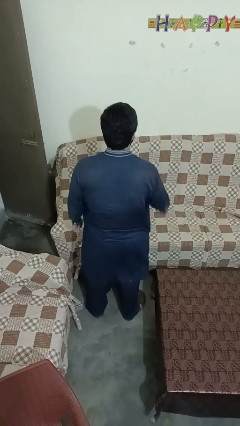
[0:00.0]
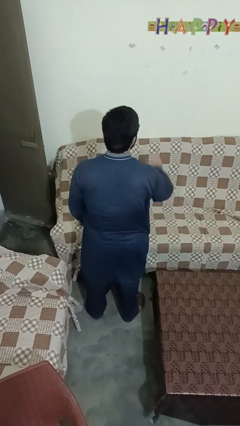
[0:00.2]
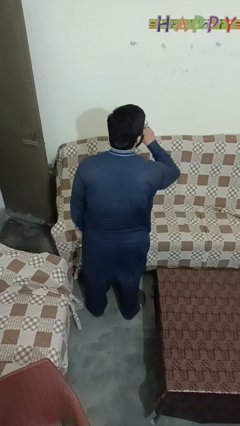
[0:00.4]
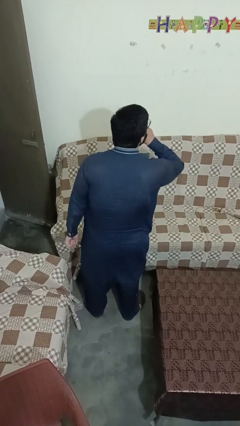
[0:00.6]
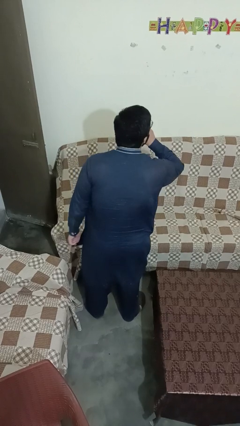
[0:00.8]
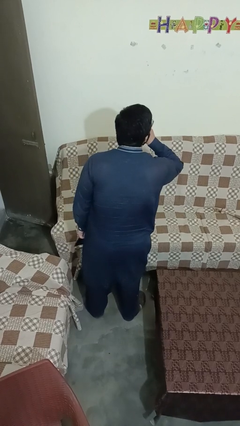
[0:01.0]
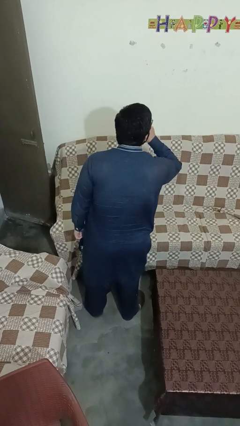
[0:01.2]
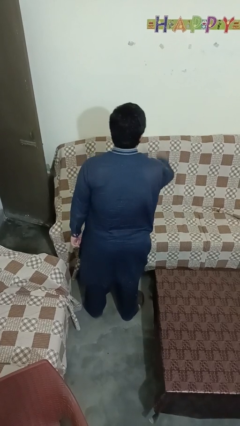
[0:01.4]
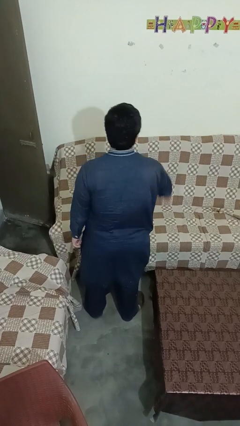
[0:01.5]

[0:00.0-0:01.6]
person gestures be quiet

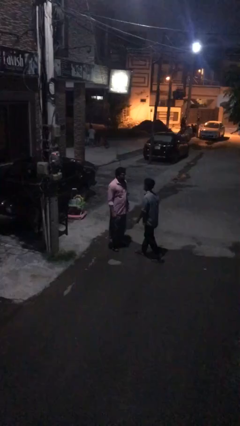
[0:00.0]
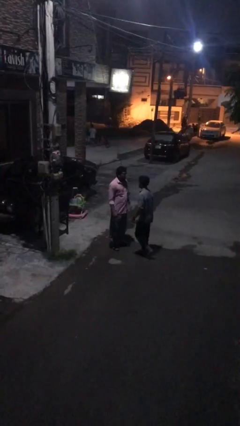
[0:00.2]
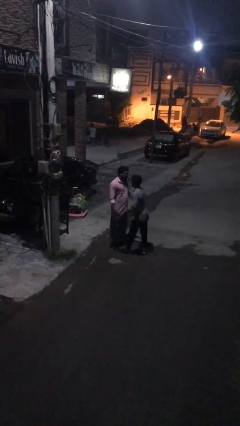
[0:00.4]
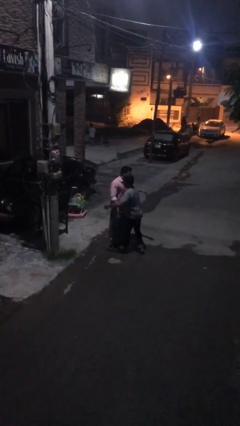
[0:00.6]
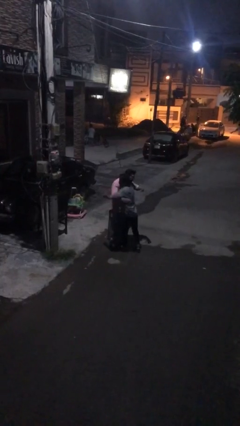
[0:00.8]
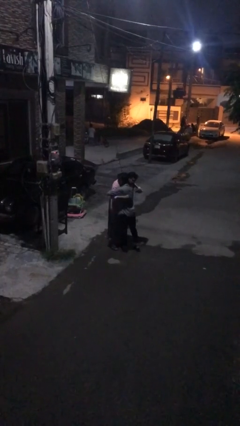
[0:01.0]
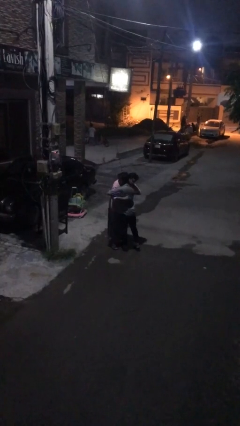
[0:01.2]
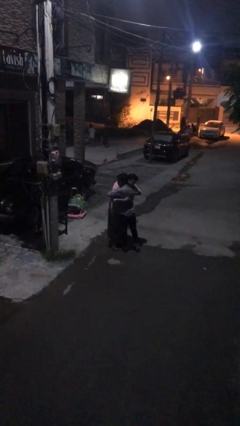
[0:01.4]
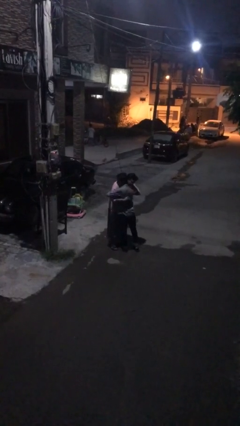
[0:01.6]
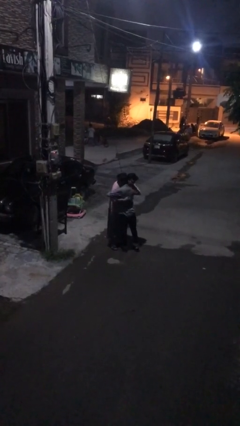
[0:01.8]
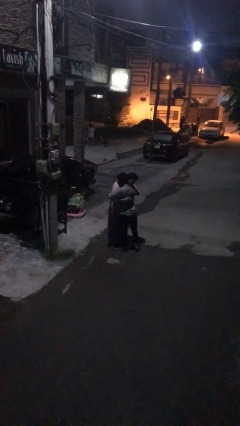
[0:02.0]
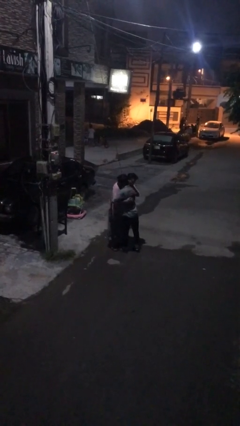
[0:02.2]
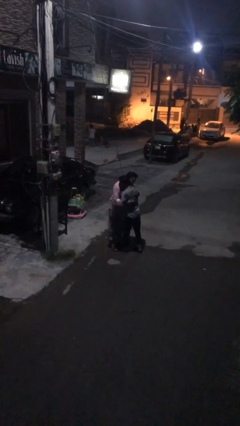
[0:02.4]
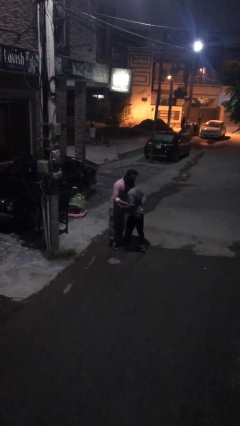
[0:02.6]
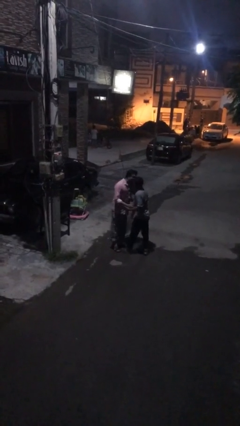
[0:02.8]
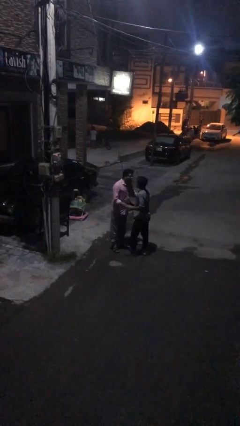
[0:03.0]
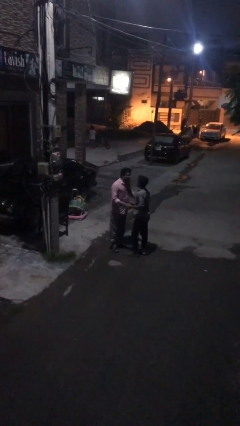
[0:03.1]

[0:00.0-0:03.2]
person embraces person

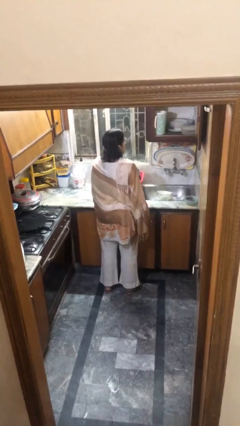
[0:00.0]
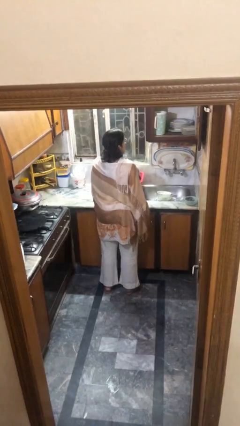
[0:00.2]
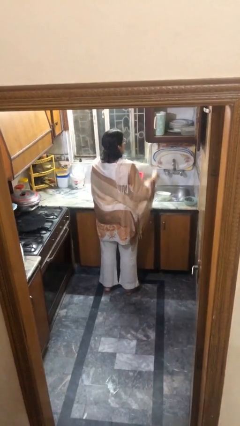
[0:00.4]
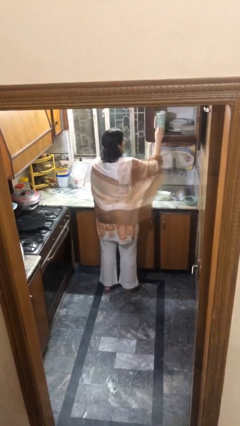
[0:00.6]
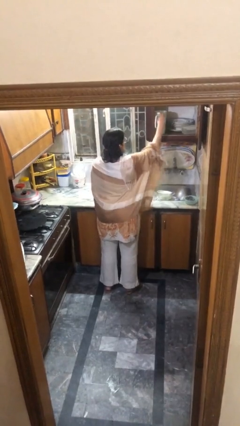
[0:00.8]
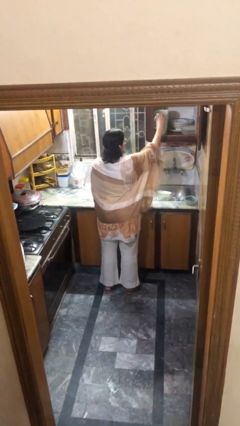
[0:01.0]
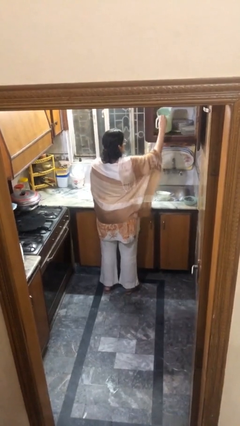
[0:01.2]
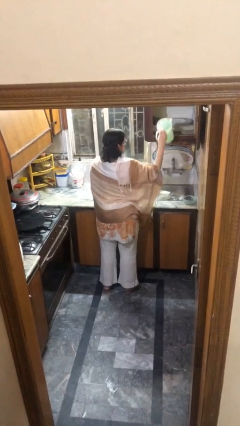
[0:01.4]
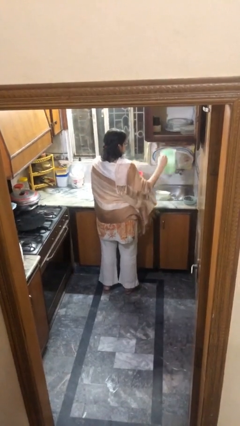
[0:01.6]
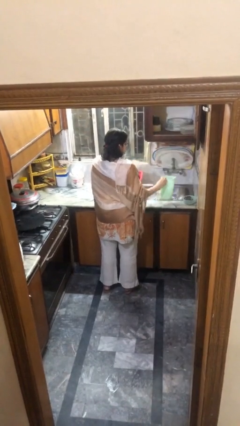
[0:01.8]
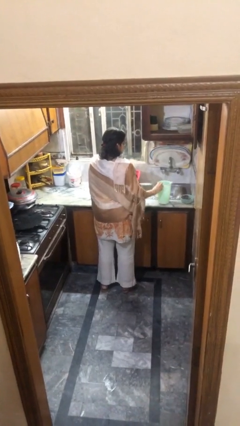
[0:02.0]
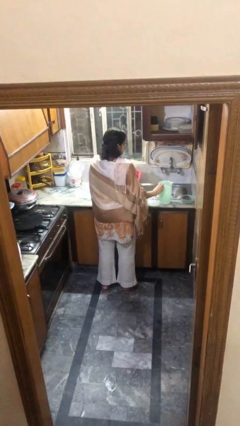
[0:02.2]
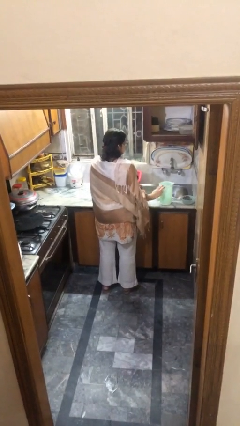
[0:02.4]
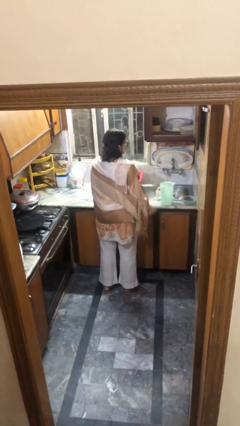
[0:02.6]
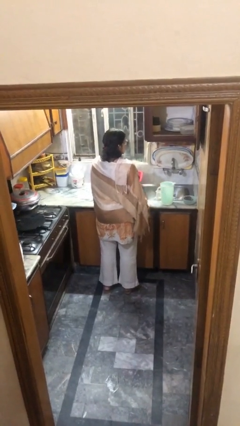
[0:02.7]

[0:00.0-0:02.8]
person takes object from kitchen drawer

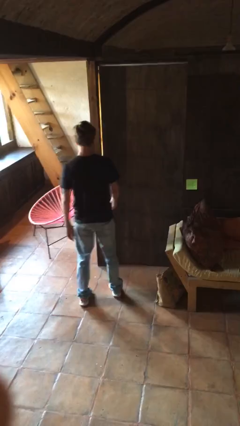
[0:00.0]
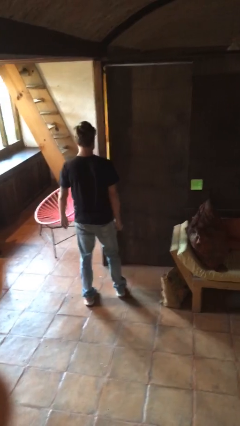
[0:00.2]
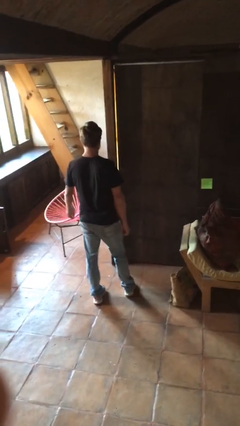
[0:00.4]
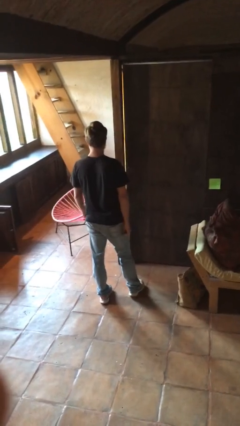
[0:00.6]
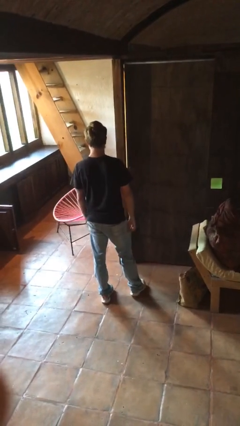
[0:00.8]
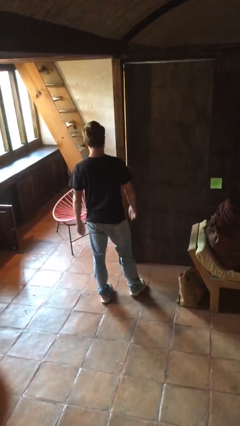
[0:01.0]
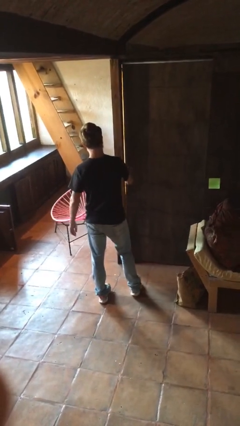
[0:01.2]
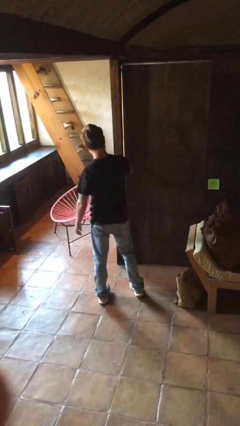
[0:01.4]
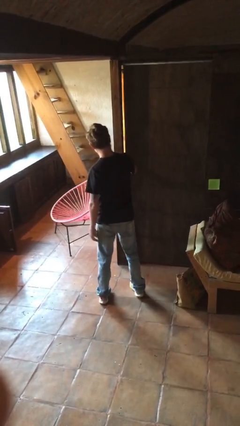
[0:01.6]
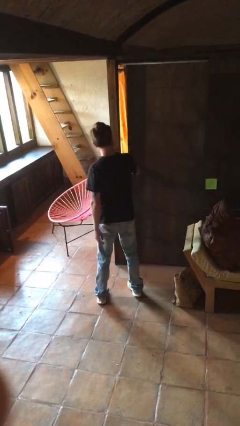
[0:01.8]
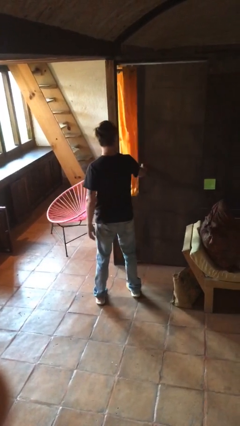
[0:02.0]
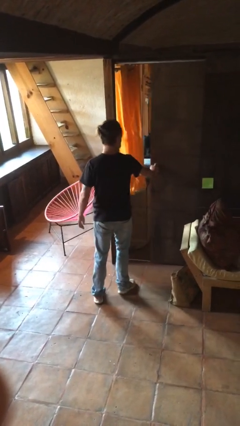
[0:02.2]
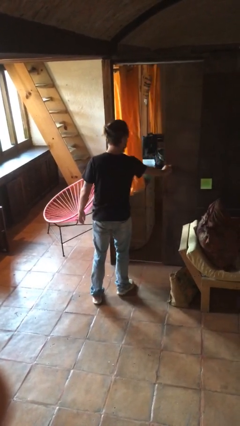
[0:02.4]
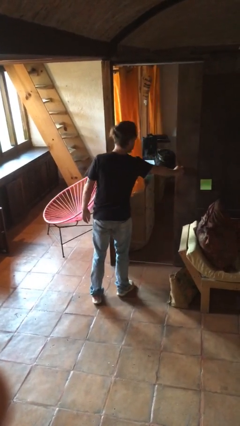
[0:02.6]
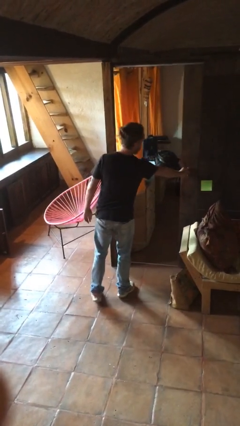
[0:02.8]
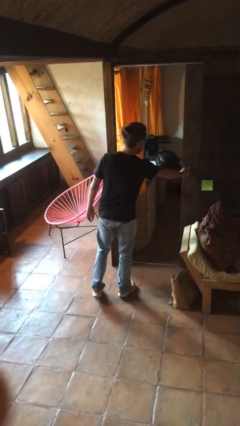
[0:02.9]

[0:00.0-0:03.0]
person opens sliding door

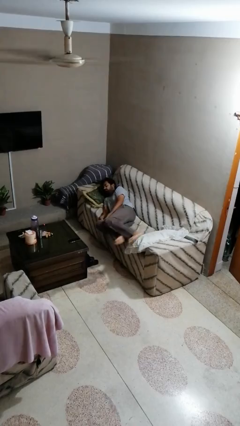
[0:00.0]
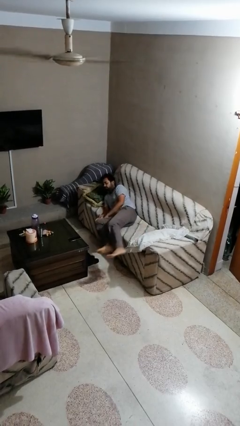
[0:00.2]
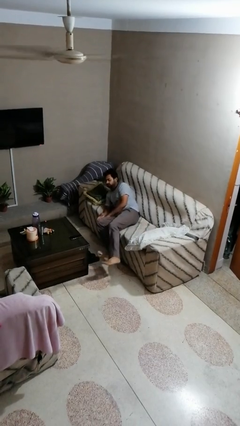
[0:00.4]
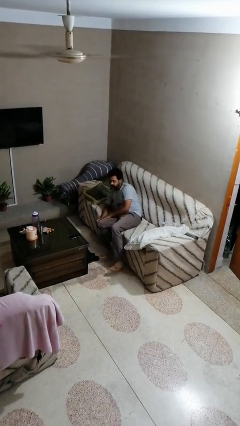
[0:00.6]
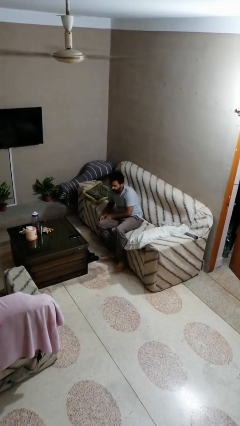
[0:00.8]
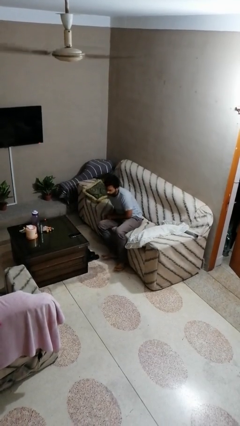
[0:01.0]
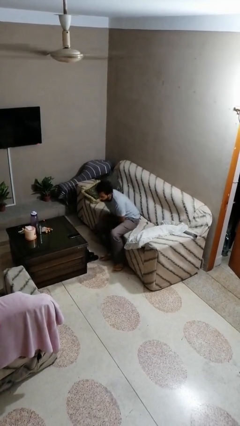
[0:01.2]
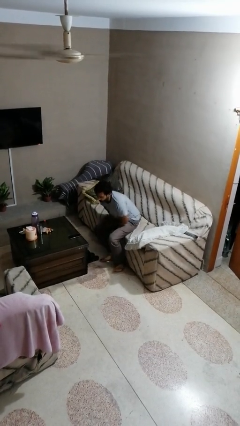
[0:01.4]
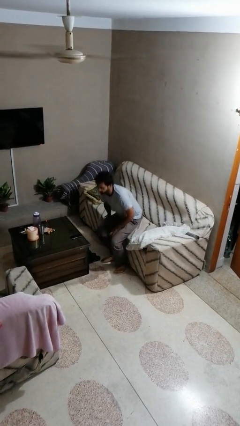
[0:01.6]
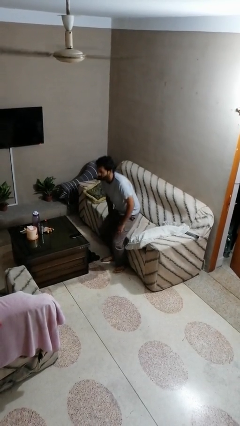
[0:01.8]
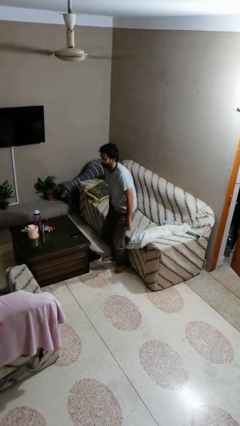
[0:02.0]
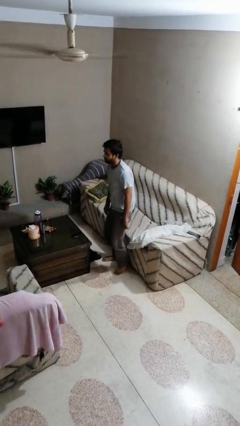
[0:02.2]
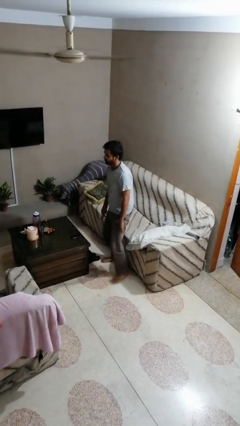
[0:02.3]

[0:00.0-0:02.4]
person stands up

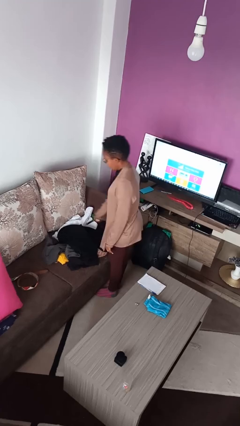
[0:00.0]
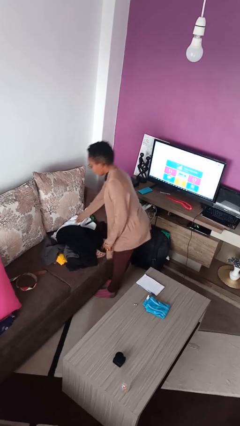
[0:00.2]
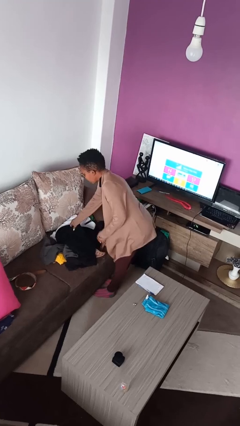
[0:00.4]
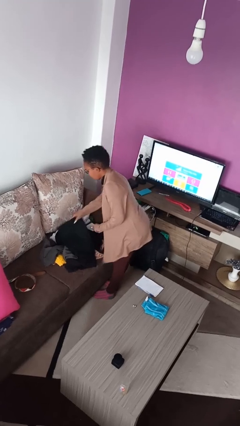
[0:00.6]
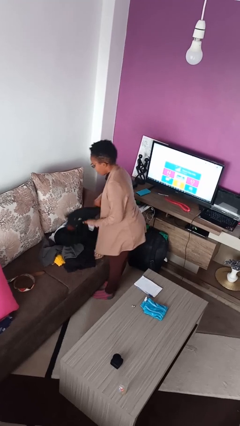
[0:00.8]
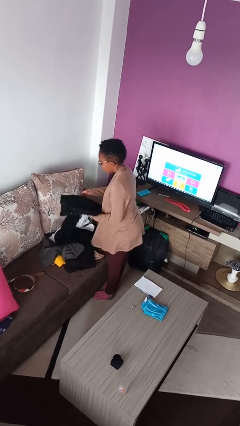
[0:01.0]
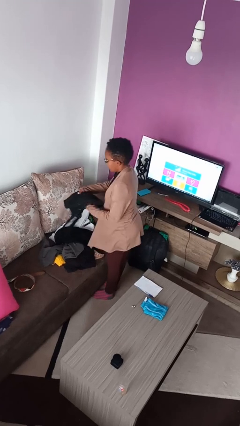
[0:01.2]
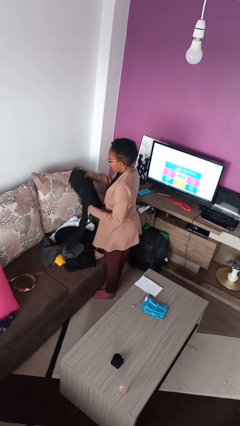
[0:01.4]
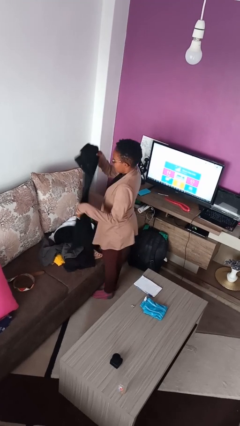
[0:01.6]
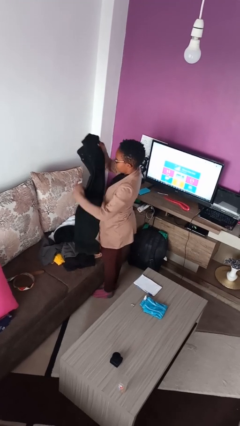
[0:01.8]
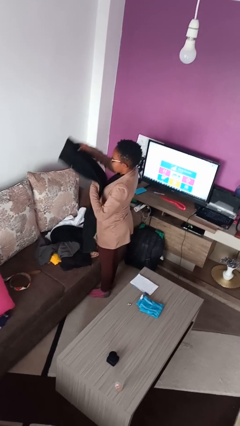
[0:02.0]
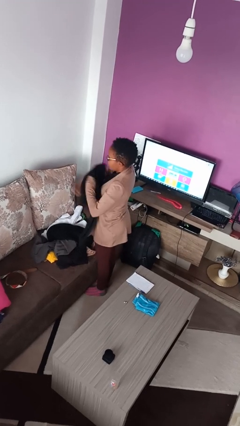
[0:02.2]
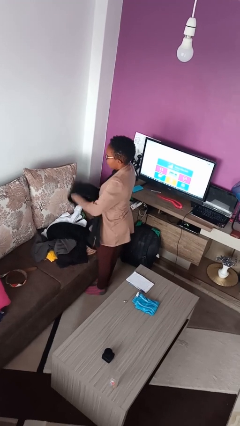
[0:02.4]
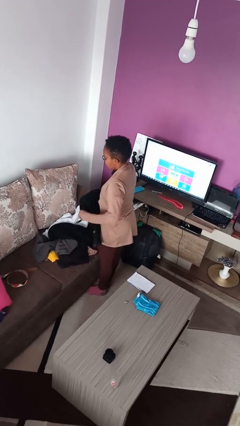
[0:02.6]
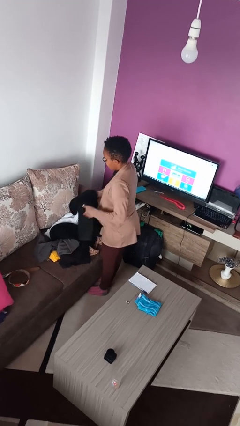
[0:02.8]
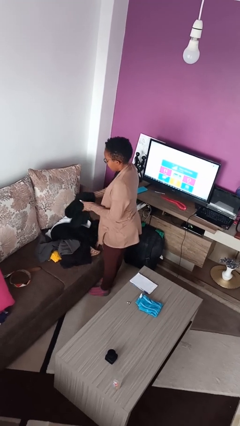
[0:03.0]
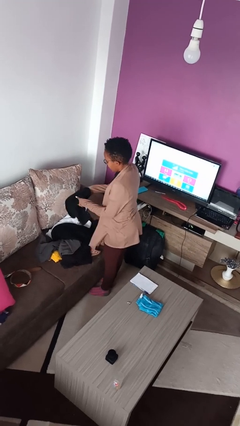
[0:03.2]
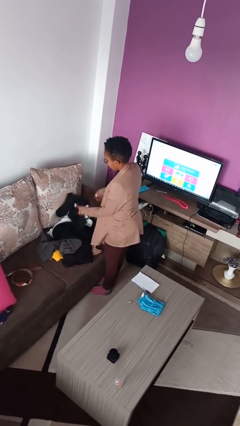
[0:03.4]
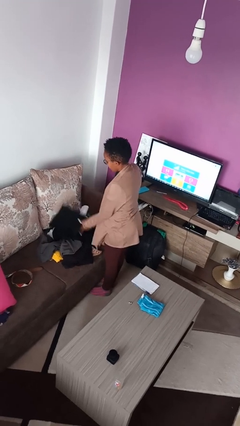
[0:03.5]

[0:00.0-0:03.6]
person folds pants

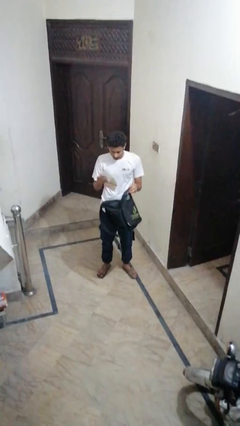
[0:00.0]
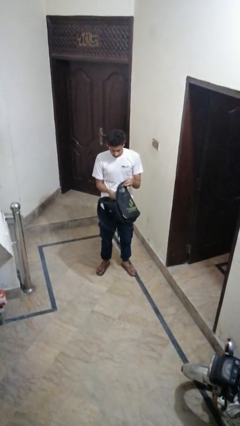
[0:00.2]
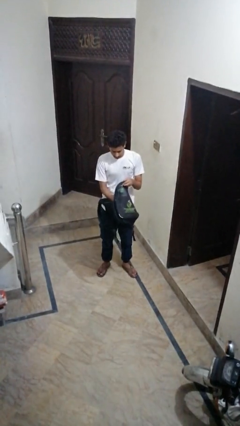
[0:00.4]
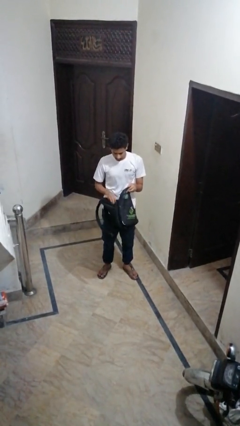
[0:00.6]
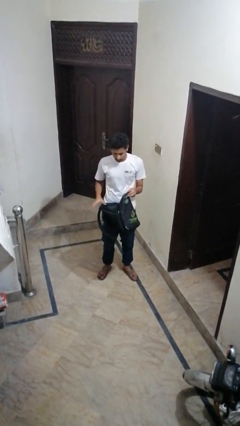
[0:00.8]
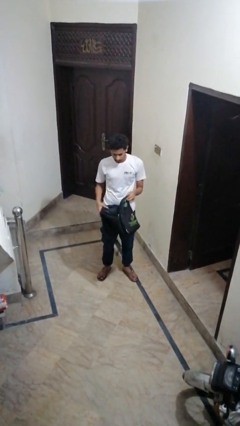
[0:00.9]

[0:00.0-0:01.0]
person puts object into backpack
